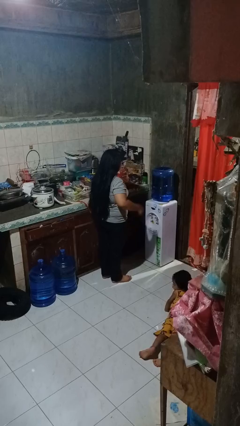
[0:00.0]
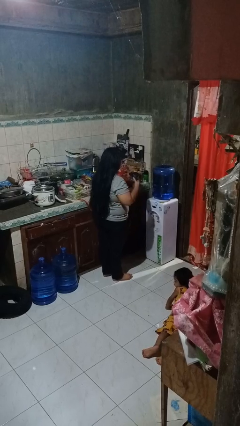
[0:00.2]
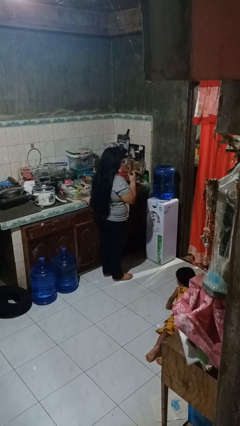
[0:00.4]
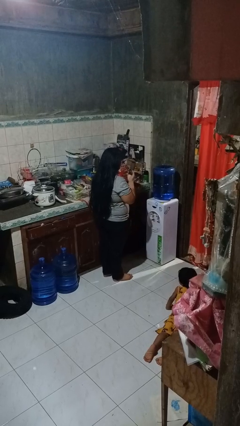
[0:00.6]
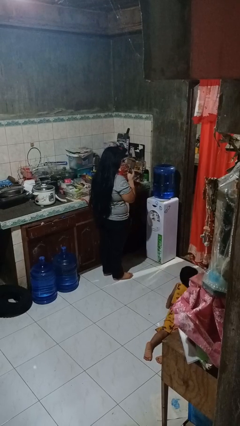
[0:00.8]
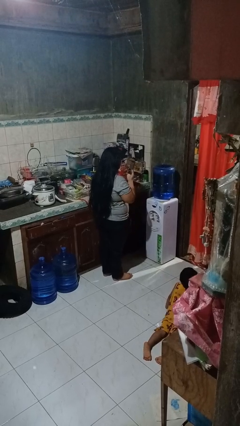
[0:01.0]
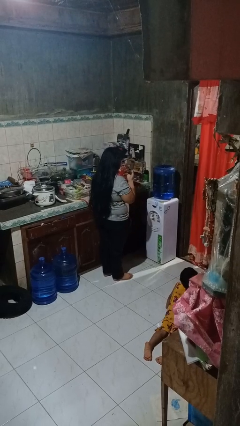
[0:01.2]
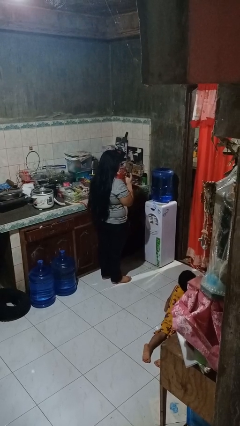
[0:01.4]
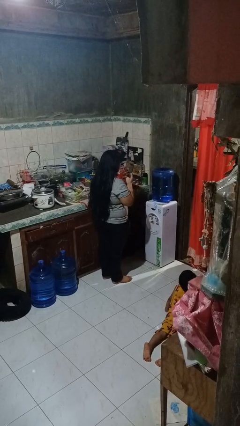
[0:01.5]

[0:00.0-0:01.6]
person takes phone from pocket

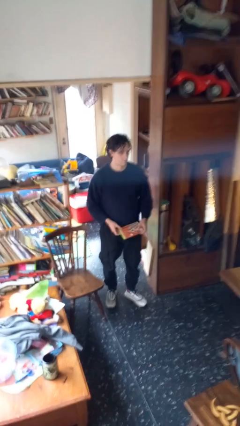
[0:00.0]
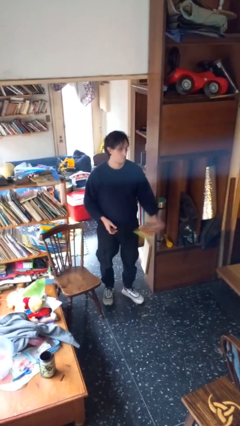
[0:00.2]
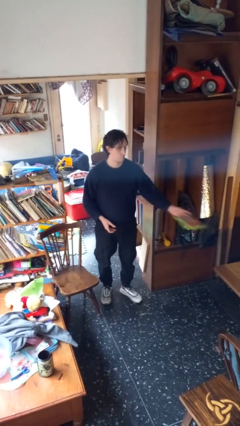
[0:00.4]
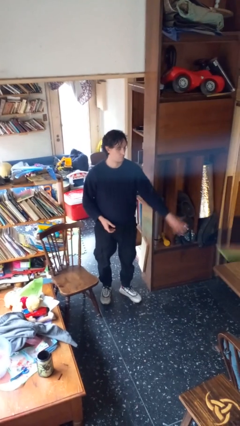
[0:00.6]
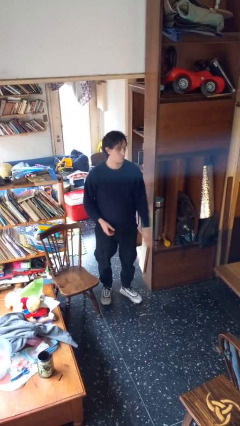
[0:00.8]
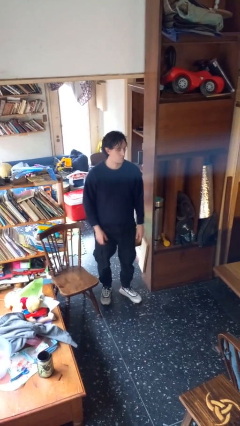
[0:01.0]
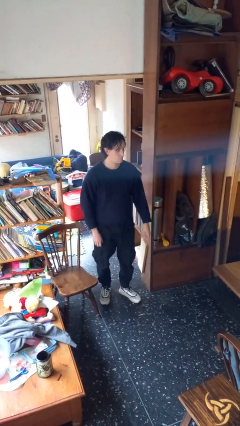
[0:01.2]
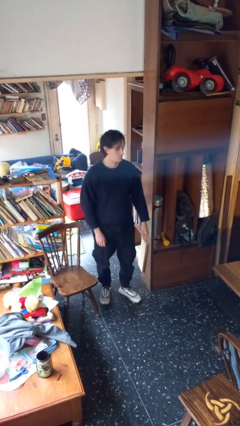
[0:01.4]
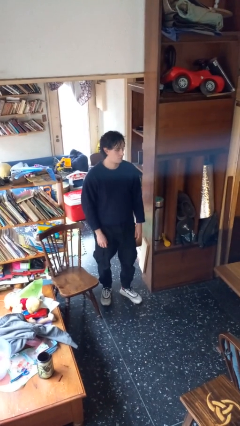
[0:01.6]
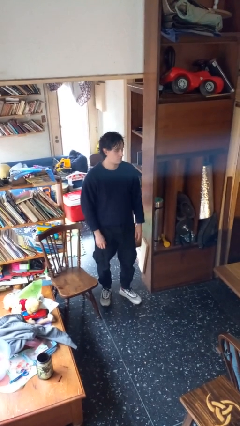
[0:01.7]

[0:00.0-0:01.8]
person throws object on table

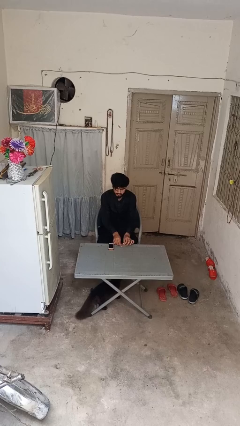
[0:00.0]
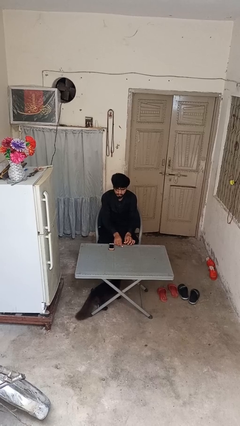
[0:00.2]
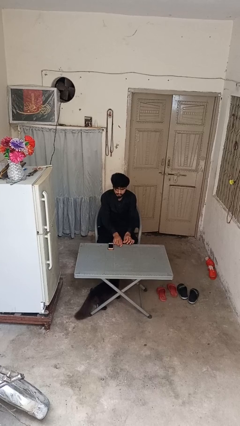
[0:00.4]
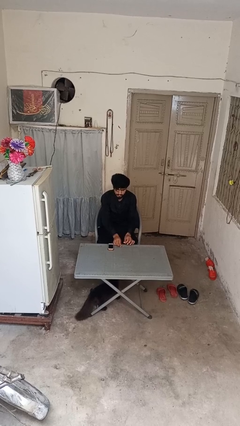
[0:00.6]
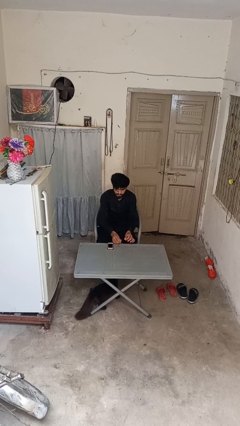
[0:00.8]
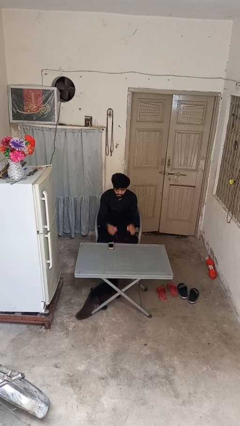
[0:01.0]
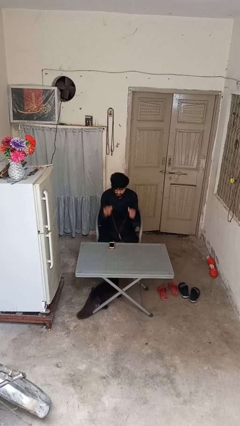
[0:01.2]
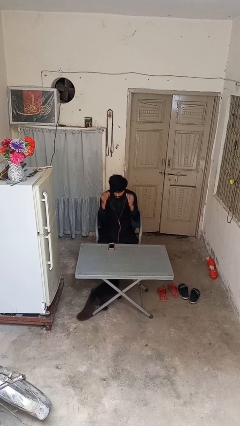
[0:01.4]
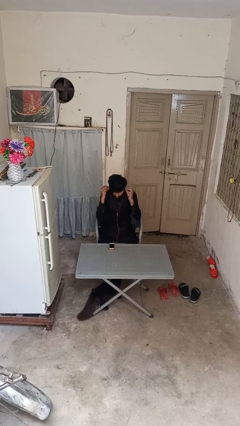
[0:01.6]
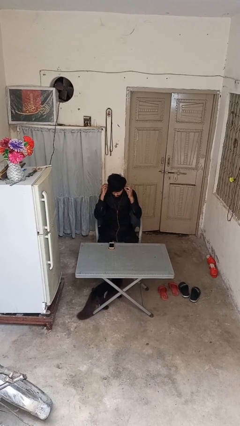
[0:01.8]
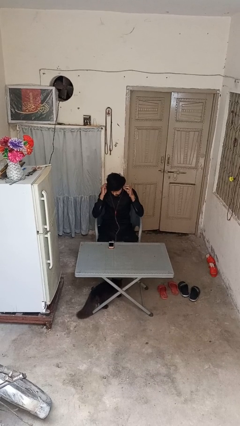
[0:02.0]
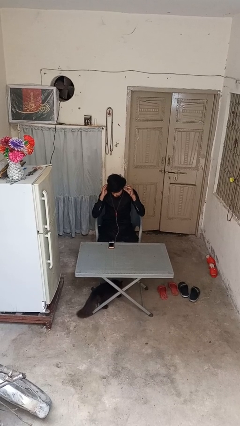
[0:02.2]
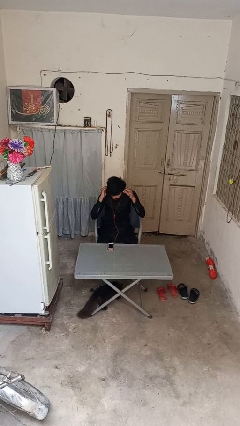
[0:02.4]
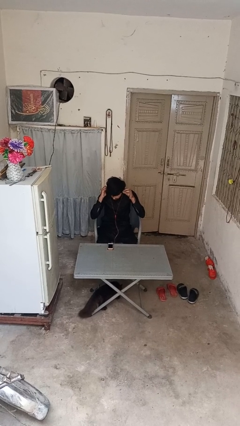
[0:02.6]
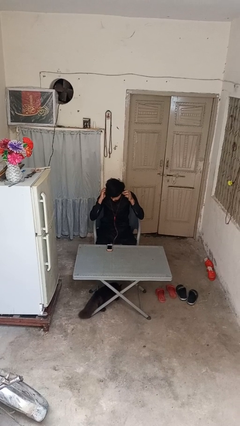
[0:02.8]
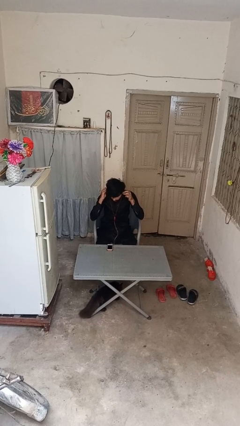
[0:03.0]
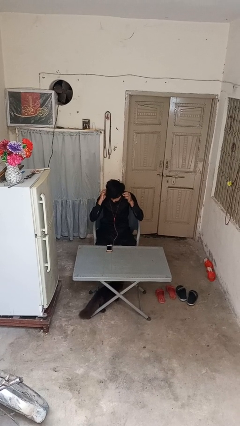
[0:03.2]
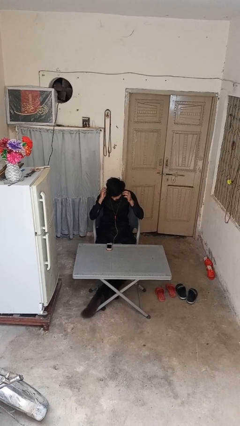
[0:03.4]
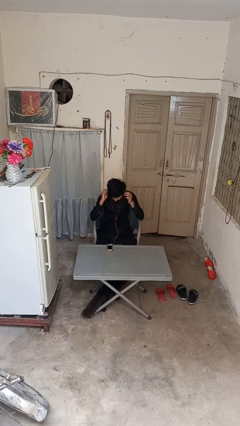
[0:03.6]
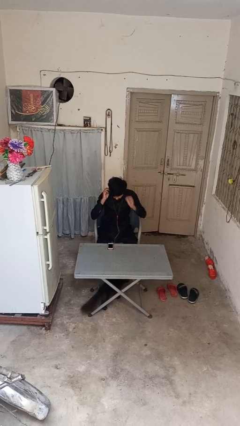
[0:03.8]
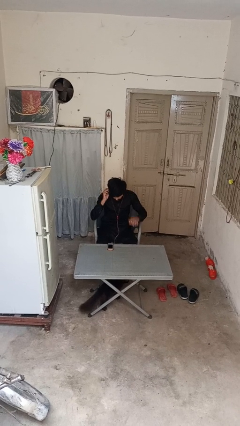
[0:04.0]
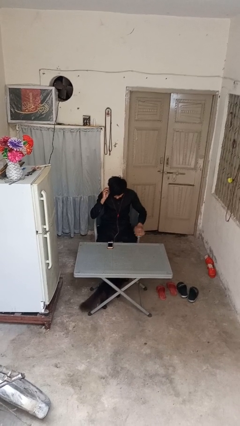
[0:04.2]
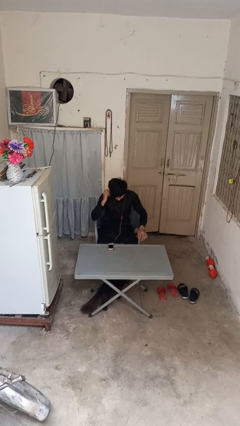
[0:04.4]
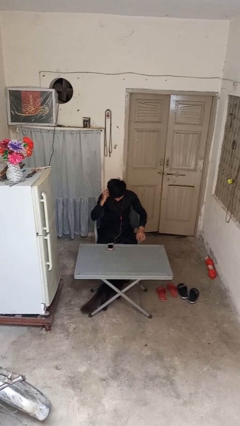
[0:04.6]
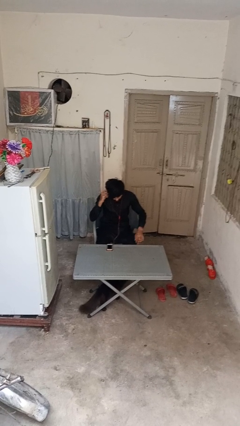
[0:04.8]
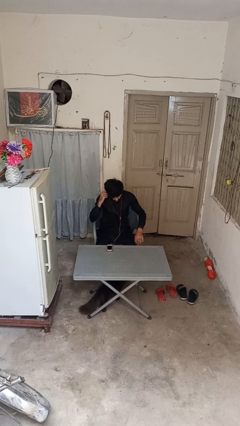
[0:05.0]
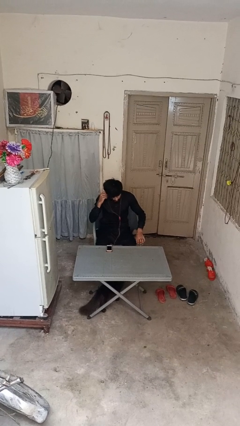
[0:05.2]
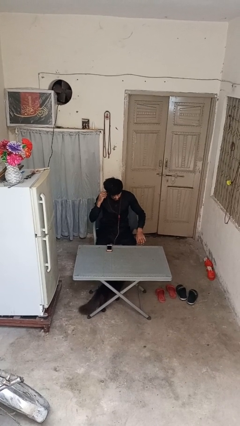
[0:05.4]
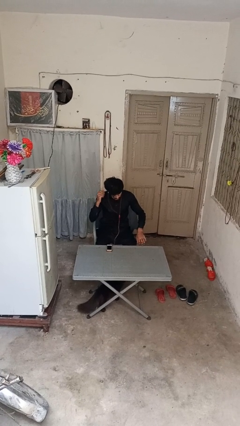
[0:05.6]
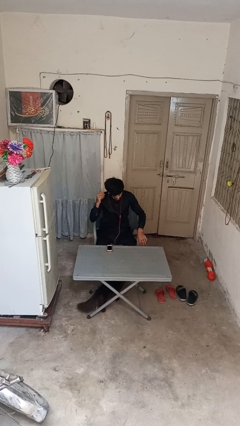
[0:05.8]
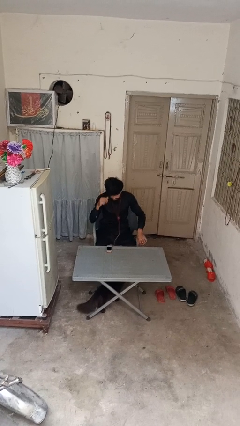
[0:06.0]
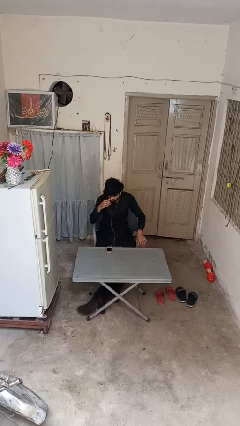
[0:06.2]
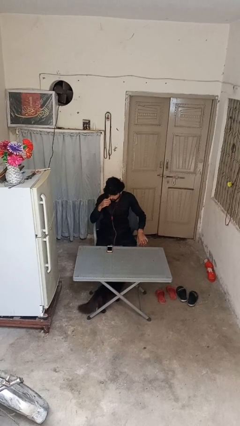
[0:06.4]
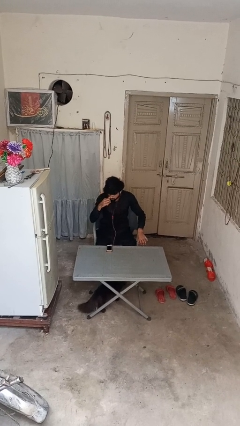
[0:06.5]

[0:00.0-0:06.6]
person puts on headphones

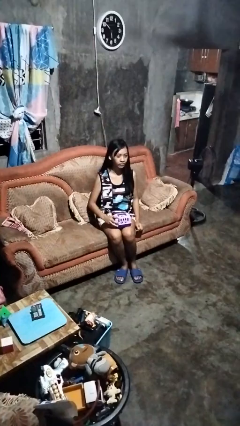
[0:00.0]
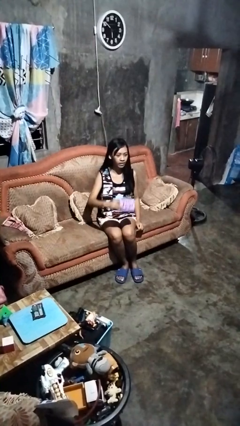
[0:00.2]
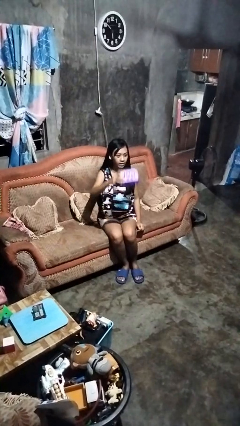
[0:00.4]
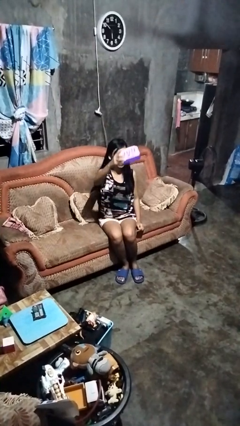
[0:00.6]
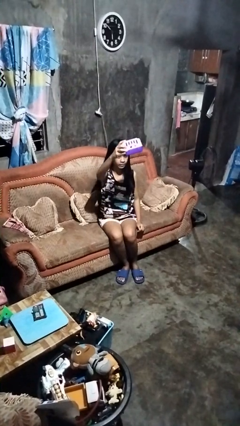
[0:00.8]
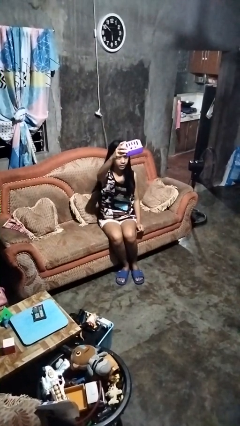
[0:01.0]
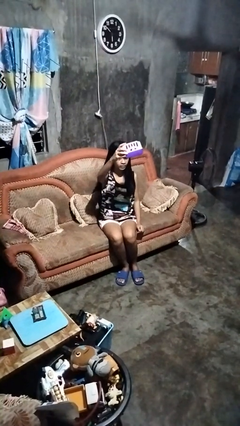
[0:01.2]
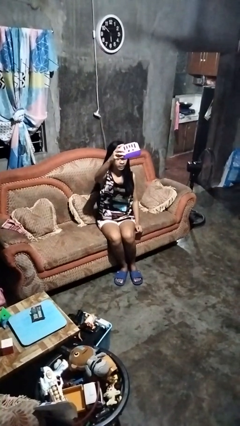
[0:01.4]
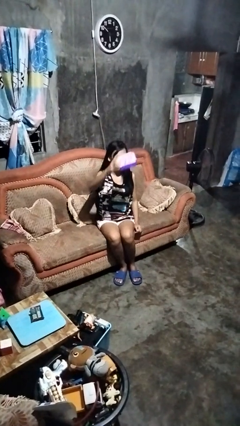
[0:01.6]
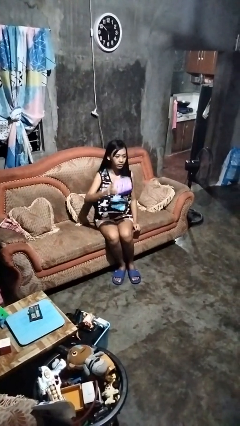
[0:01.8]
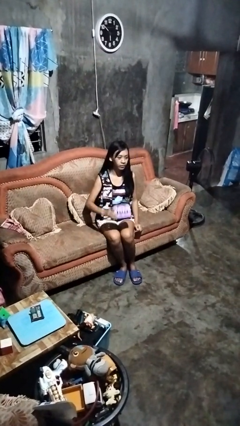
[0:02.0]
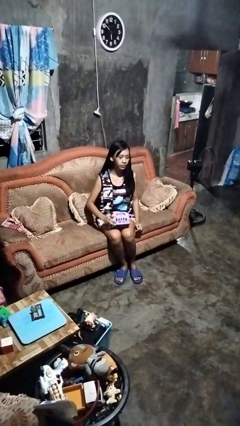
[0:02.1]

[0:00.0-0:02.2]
person holds object above head

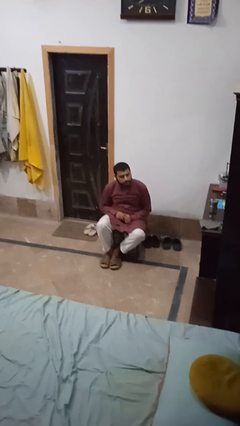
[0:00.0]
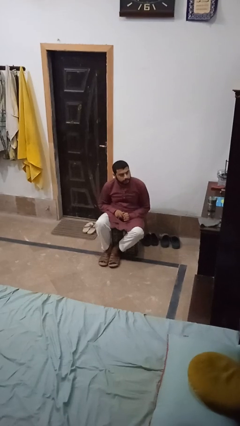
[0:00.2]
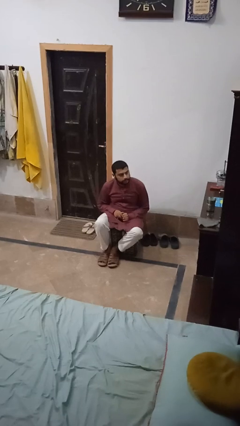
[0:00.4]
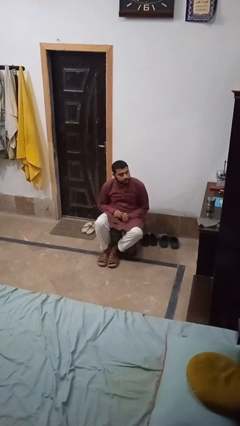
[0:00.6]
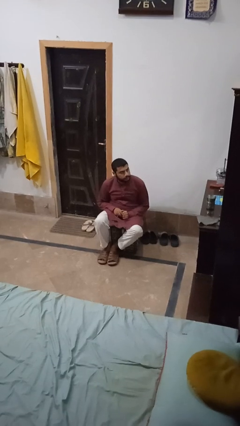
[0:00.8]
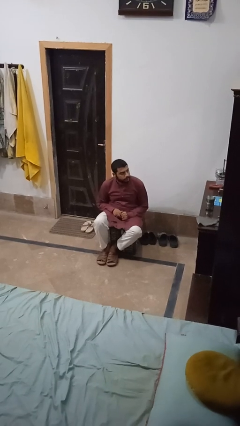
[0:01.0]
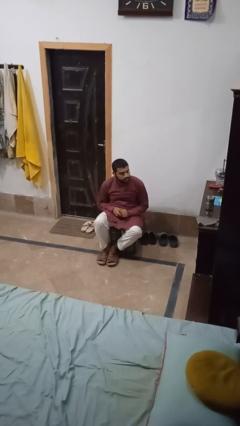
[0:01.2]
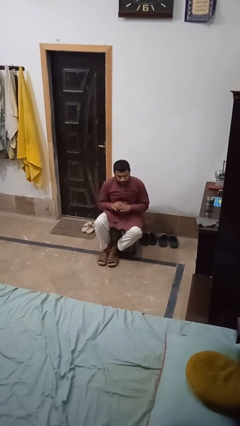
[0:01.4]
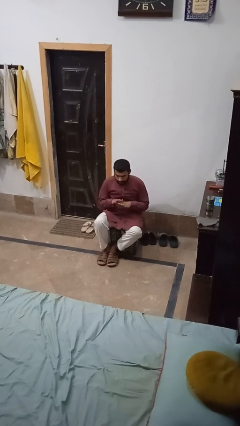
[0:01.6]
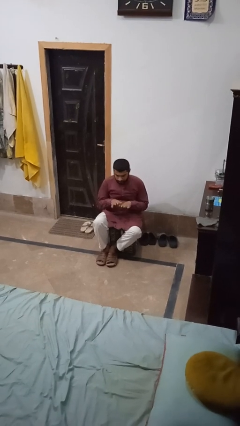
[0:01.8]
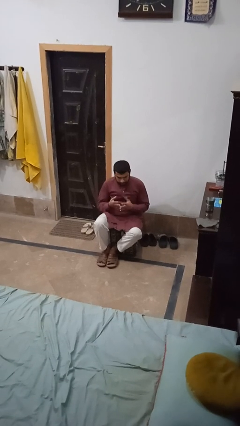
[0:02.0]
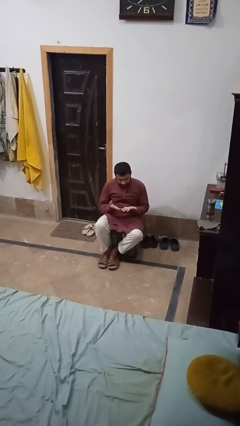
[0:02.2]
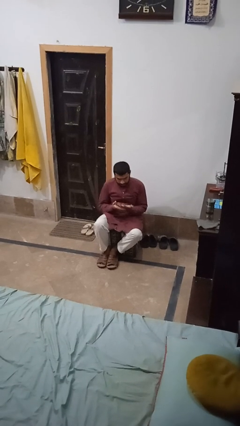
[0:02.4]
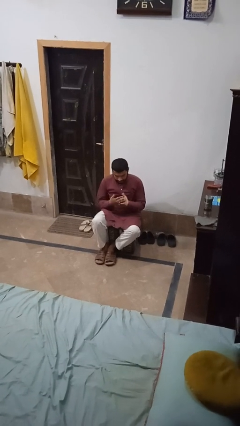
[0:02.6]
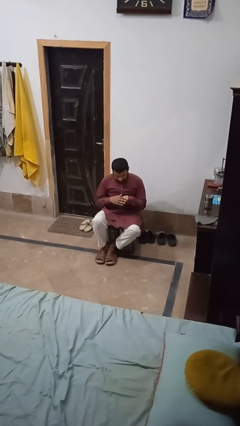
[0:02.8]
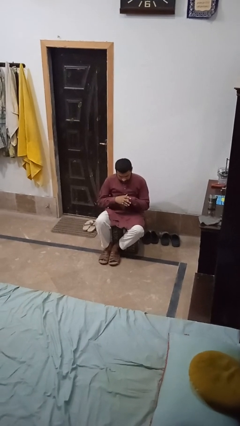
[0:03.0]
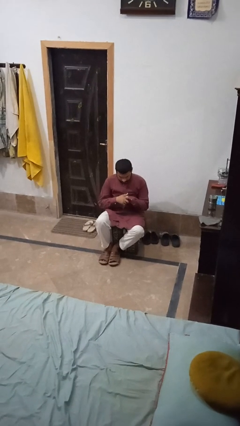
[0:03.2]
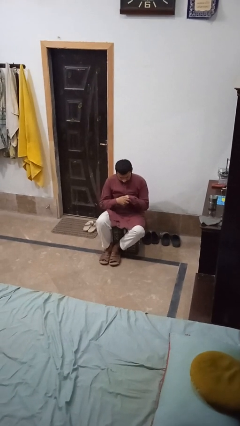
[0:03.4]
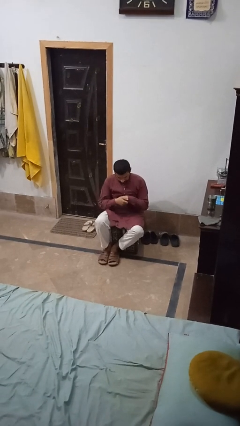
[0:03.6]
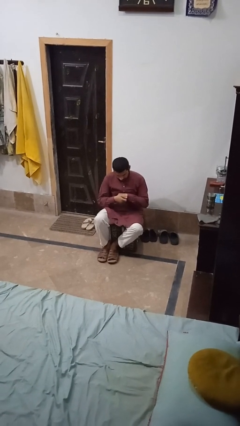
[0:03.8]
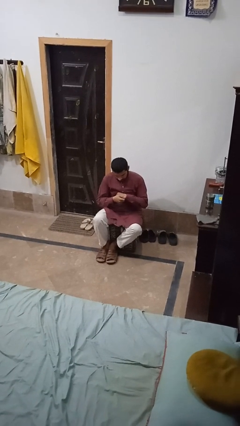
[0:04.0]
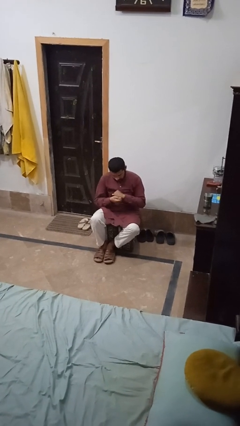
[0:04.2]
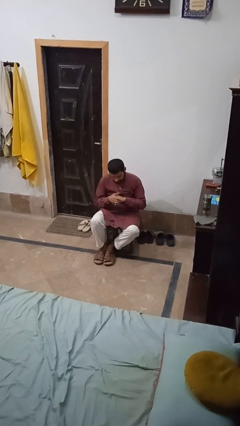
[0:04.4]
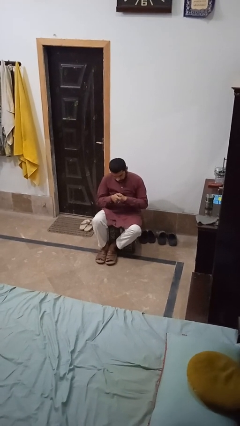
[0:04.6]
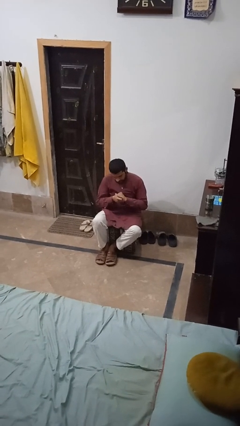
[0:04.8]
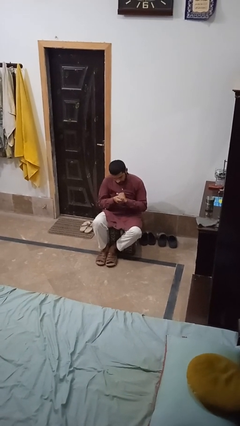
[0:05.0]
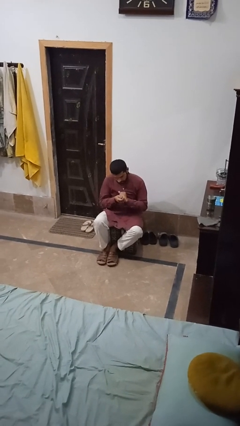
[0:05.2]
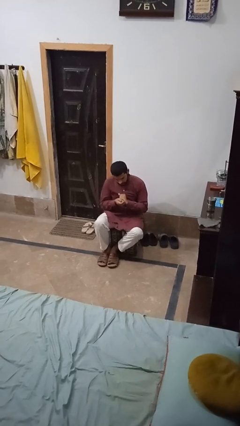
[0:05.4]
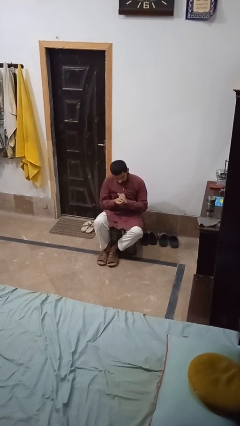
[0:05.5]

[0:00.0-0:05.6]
person looks at hands in lap
